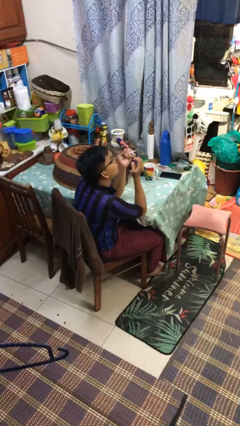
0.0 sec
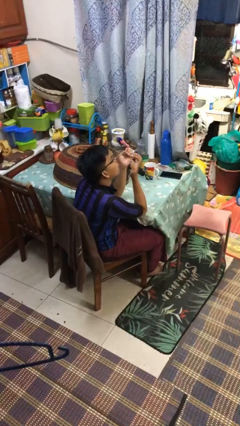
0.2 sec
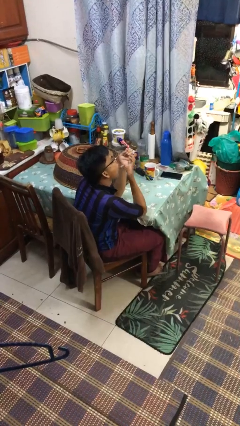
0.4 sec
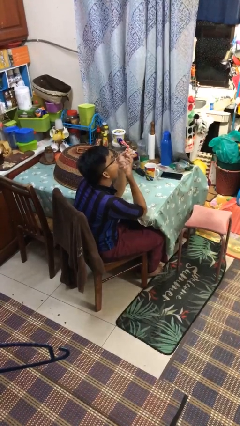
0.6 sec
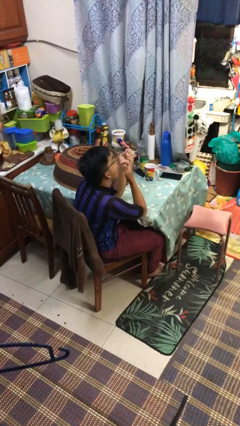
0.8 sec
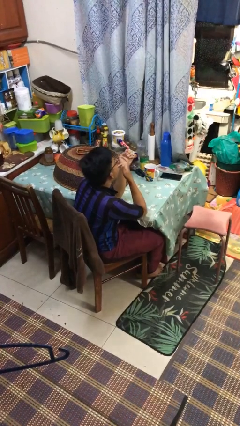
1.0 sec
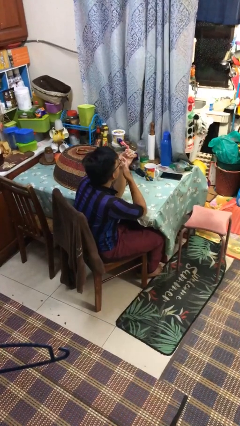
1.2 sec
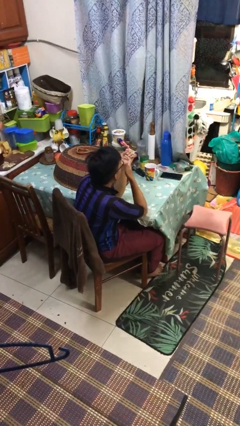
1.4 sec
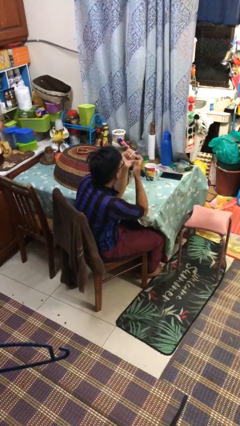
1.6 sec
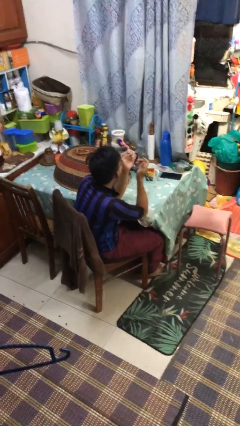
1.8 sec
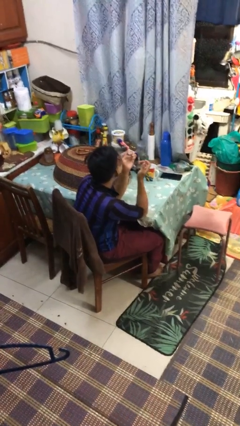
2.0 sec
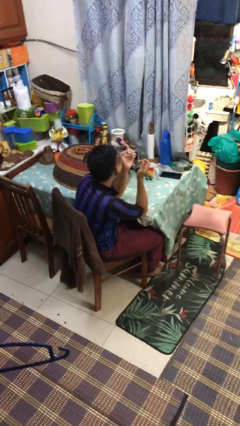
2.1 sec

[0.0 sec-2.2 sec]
person licks fingers

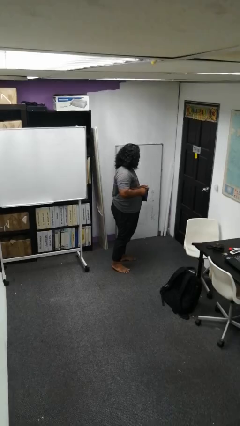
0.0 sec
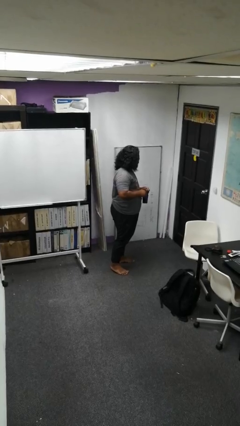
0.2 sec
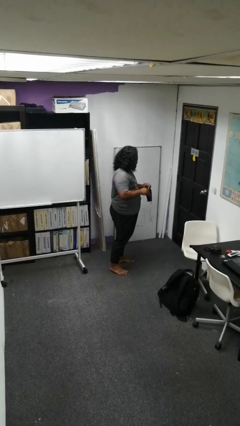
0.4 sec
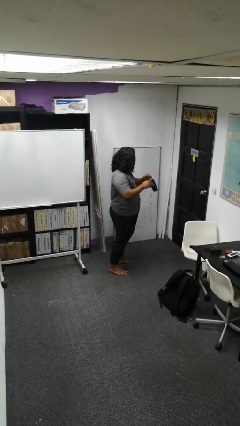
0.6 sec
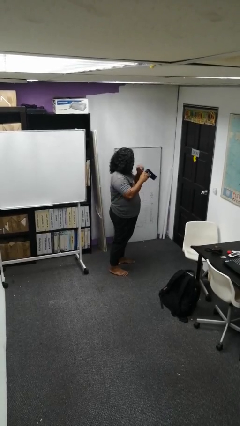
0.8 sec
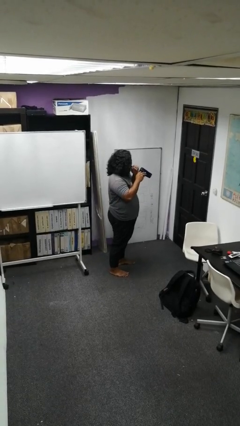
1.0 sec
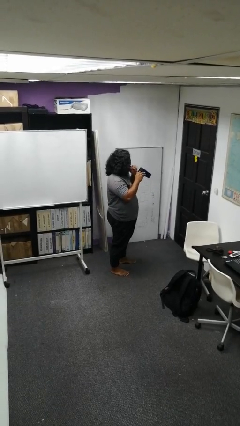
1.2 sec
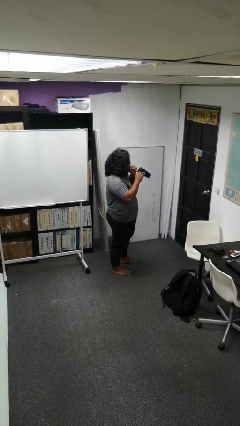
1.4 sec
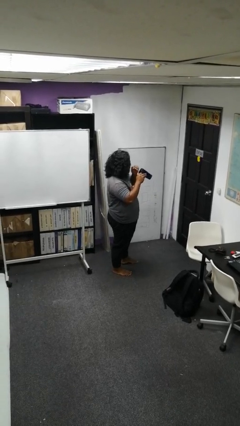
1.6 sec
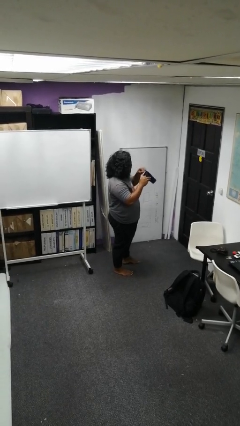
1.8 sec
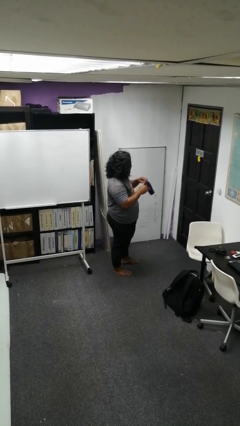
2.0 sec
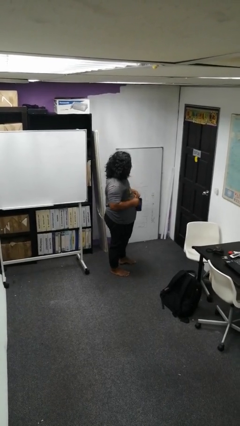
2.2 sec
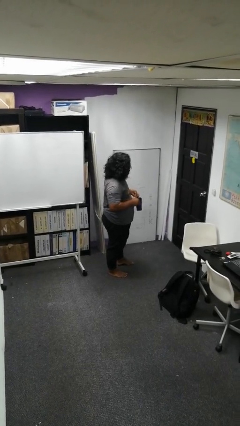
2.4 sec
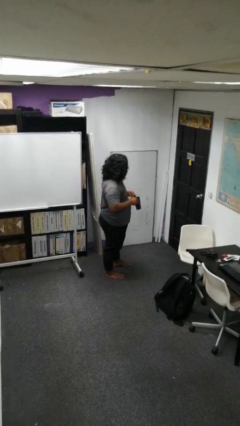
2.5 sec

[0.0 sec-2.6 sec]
person drinks from straw

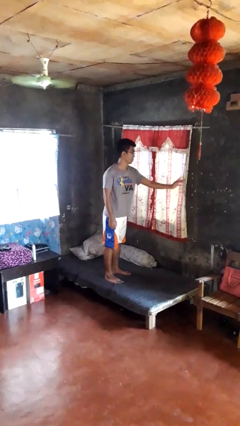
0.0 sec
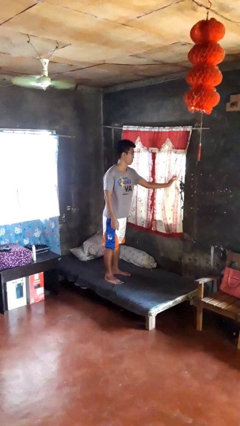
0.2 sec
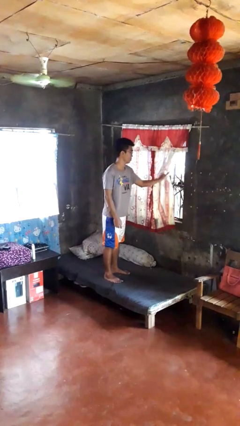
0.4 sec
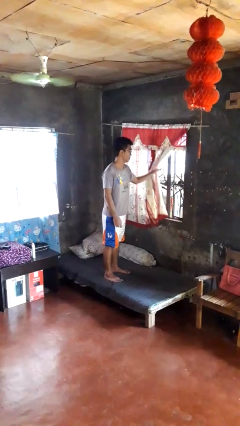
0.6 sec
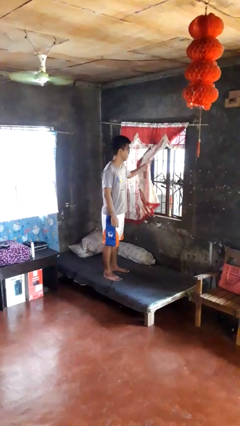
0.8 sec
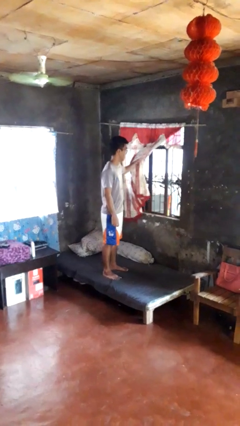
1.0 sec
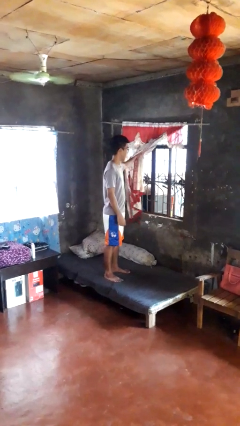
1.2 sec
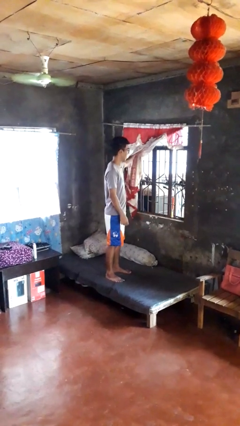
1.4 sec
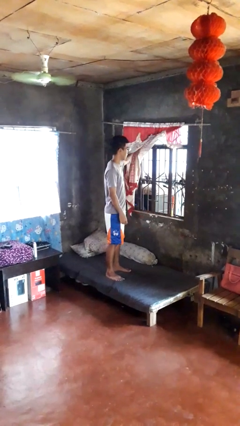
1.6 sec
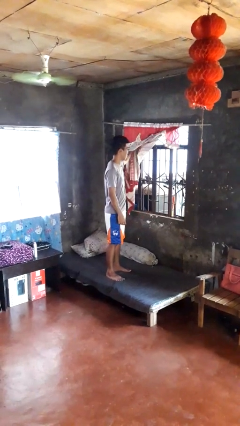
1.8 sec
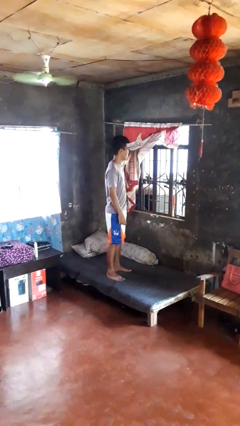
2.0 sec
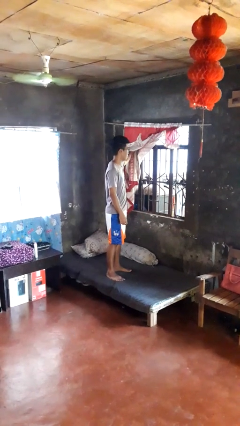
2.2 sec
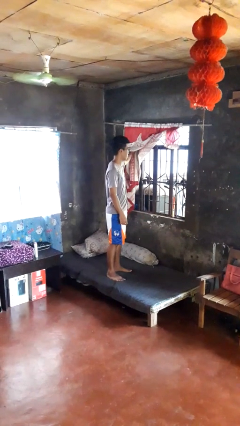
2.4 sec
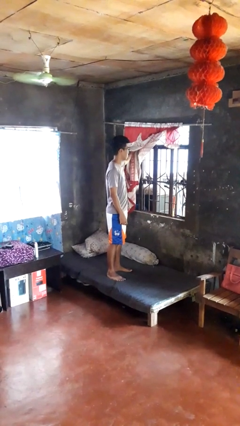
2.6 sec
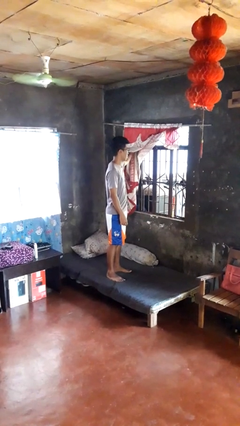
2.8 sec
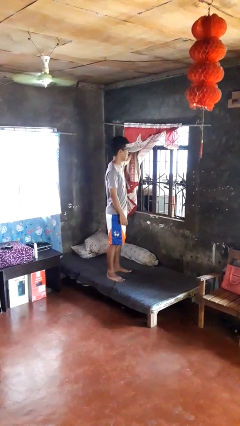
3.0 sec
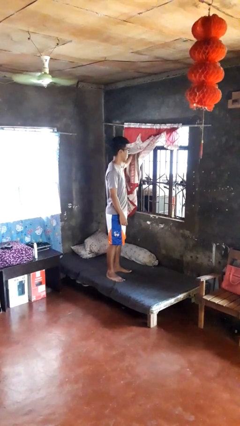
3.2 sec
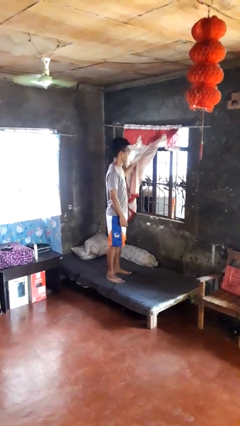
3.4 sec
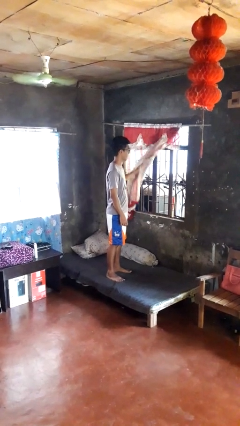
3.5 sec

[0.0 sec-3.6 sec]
person opens curtains

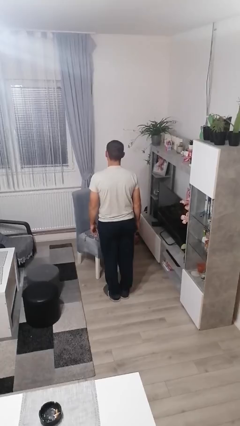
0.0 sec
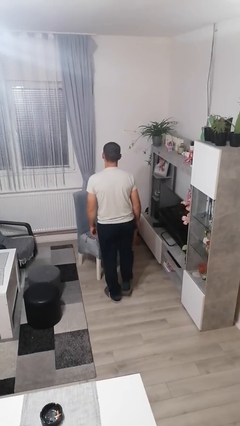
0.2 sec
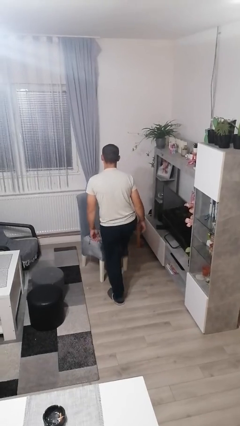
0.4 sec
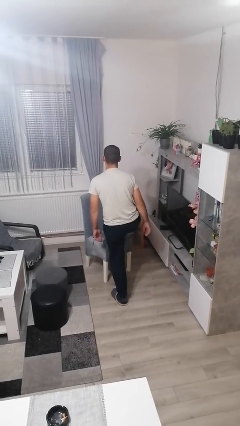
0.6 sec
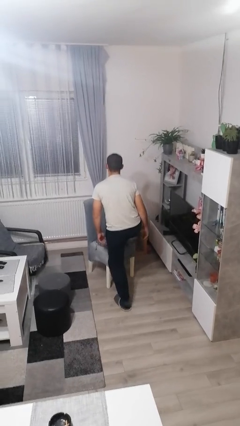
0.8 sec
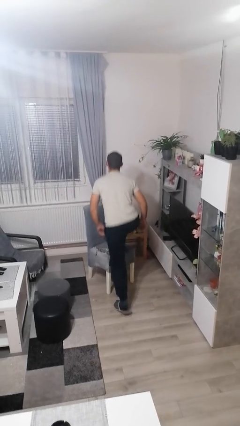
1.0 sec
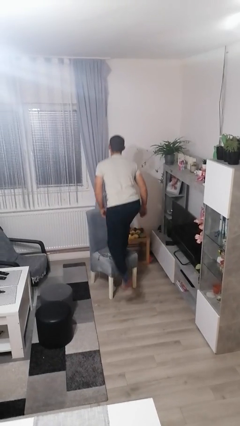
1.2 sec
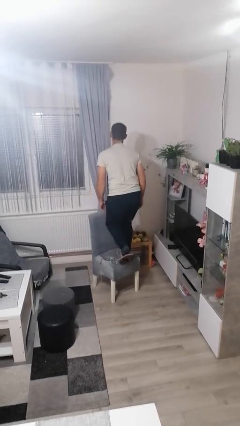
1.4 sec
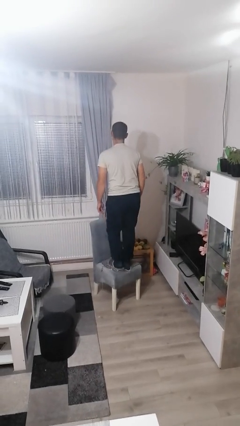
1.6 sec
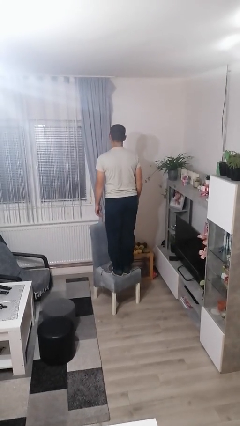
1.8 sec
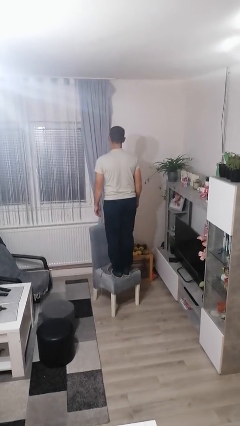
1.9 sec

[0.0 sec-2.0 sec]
person climbs on chair

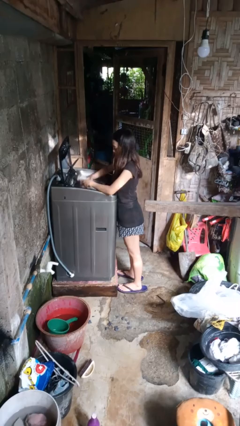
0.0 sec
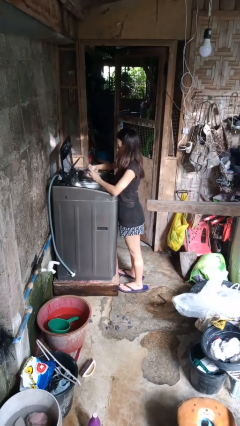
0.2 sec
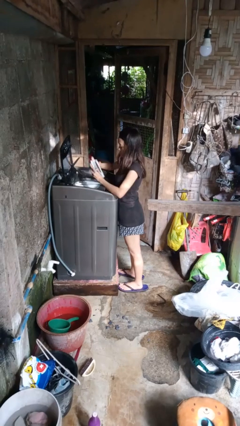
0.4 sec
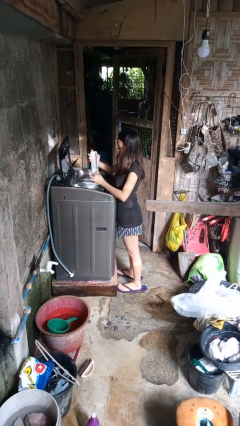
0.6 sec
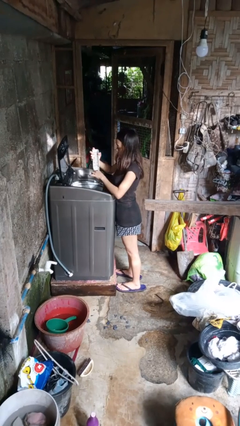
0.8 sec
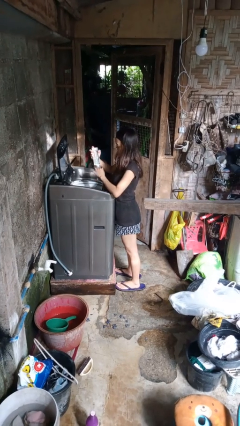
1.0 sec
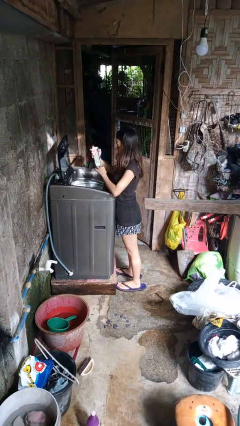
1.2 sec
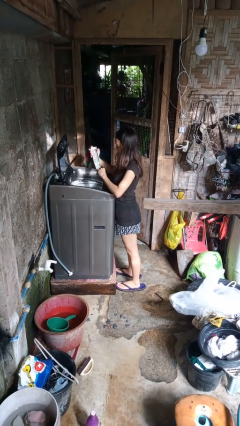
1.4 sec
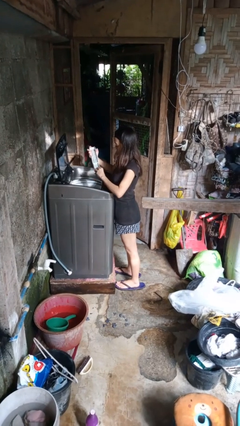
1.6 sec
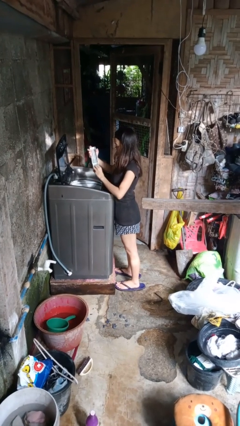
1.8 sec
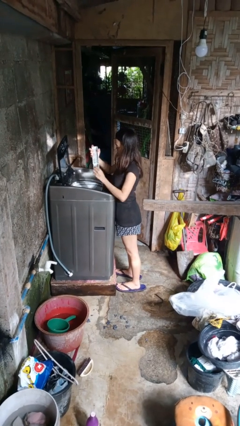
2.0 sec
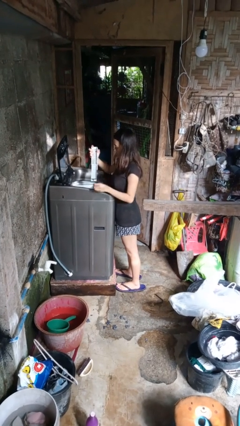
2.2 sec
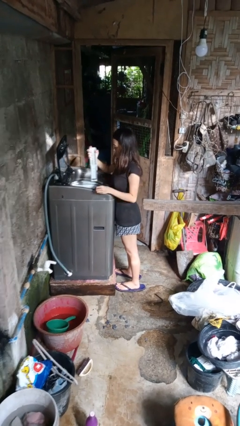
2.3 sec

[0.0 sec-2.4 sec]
person cleans dryer lint trap

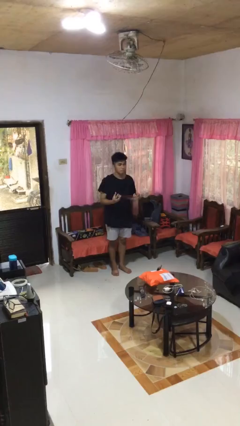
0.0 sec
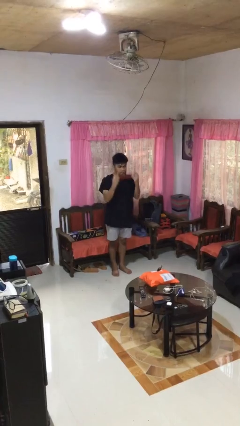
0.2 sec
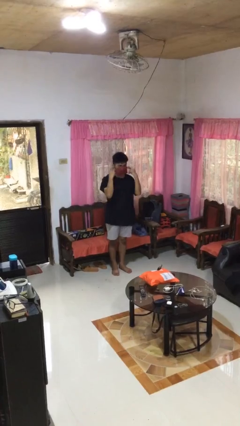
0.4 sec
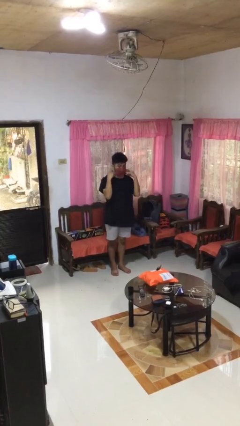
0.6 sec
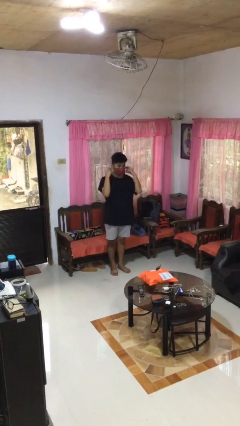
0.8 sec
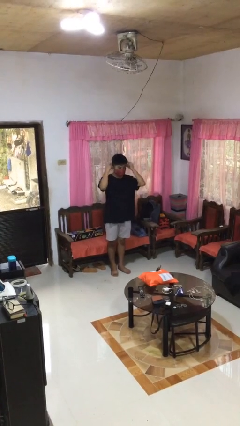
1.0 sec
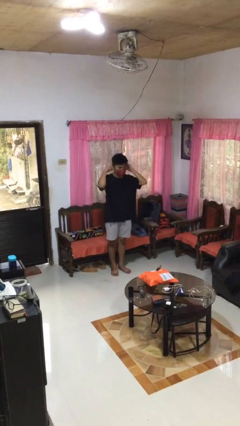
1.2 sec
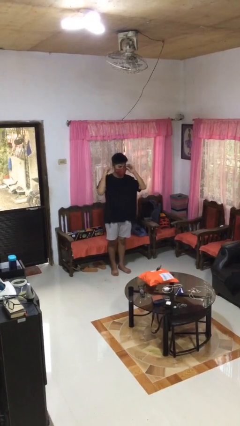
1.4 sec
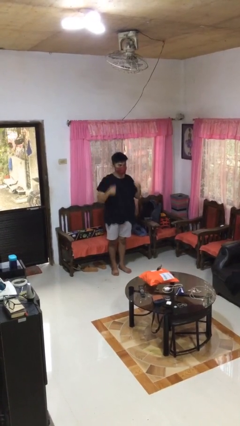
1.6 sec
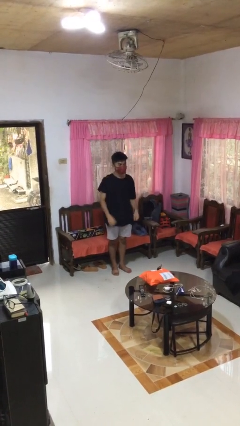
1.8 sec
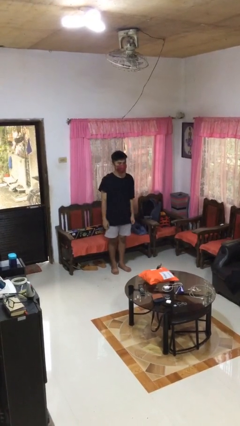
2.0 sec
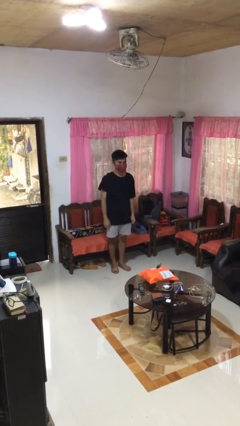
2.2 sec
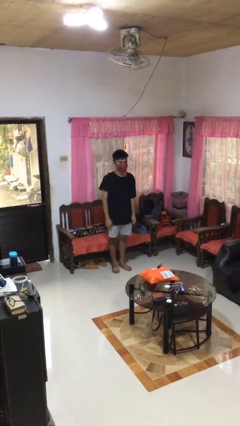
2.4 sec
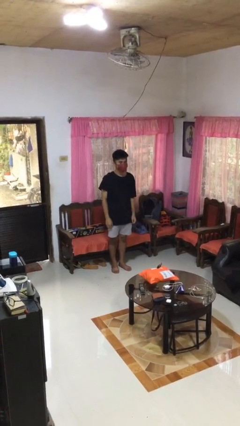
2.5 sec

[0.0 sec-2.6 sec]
person puts on facemask

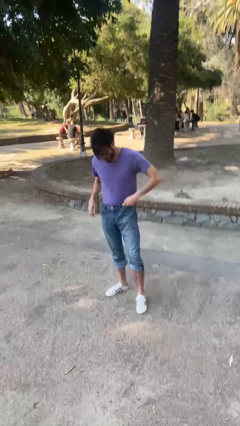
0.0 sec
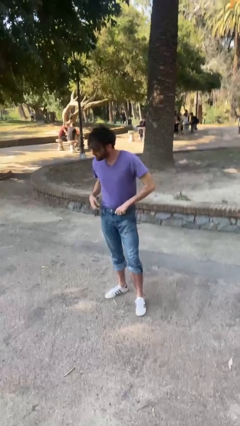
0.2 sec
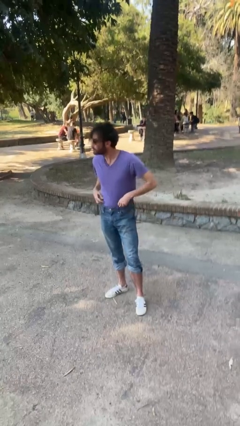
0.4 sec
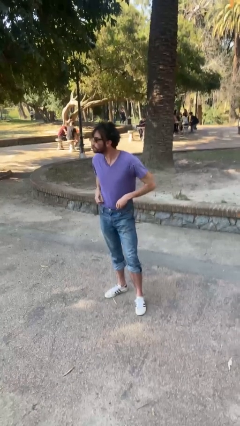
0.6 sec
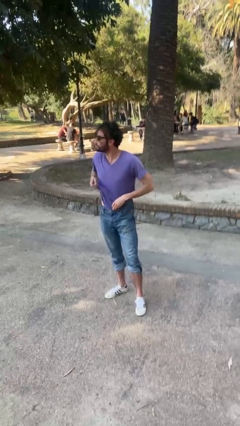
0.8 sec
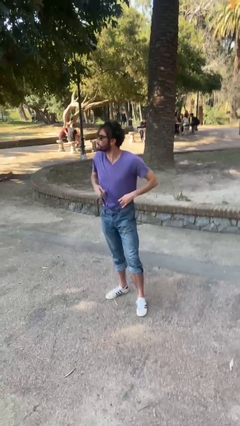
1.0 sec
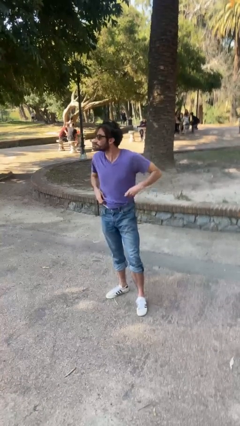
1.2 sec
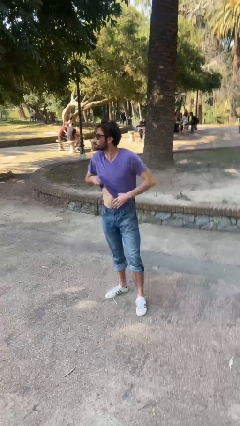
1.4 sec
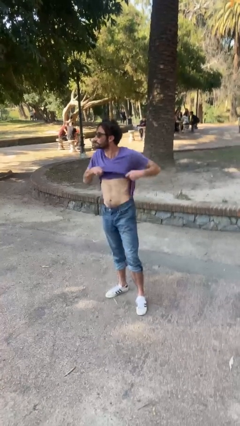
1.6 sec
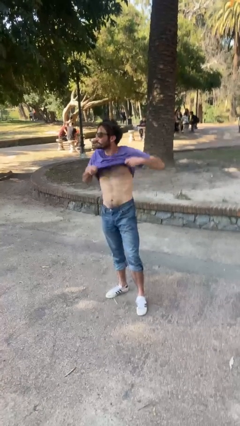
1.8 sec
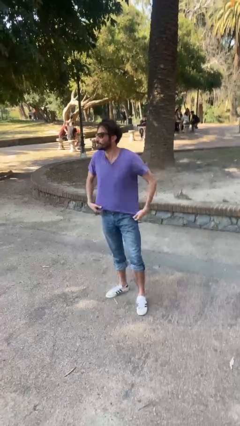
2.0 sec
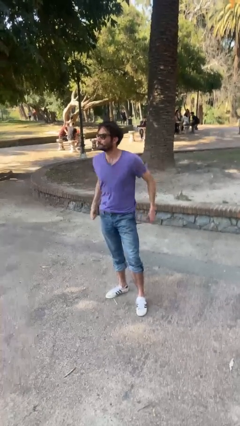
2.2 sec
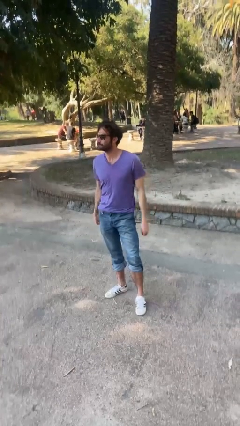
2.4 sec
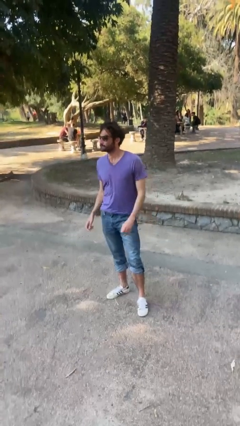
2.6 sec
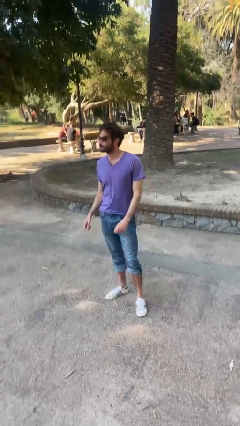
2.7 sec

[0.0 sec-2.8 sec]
person untucks shirt
